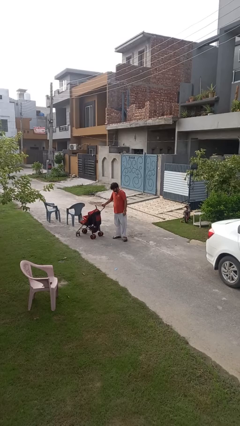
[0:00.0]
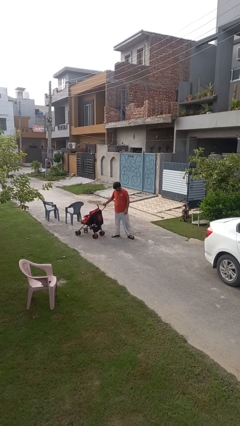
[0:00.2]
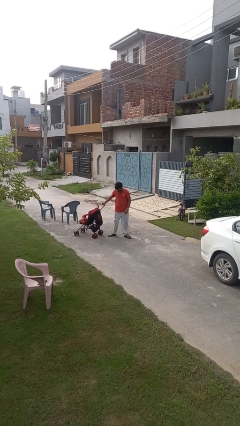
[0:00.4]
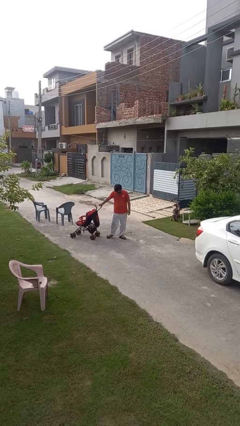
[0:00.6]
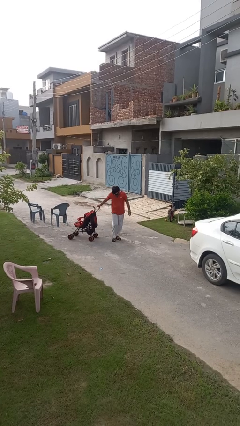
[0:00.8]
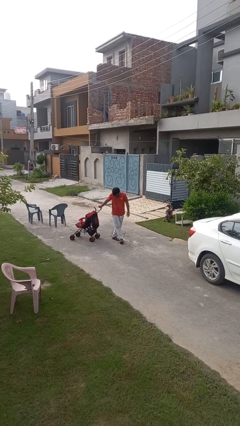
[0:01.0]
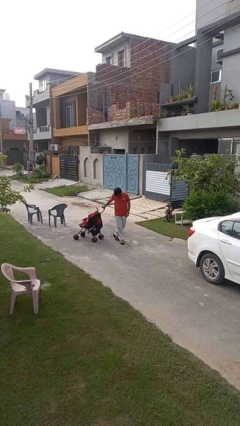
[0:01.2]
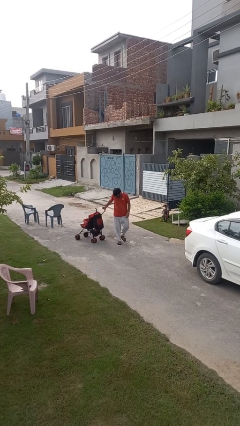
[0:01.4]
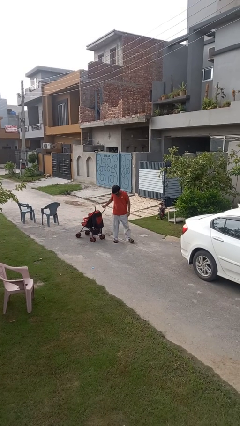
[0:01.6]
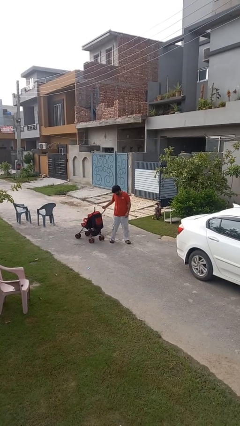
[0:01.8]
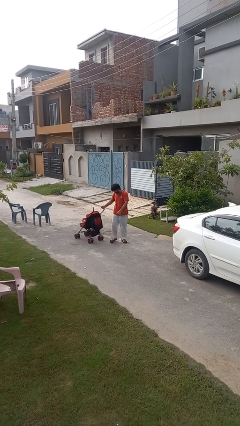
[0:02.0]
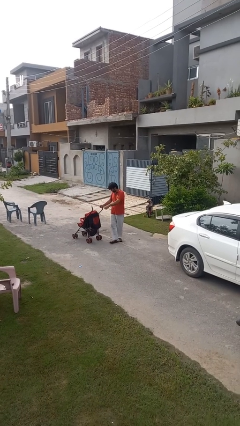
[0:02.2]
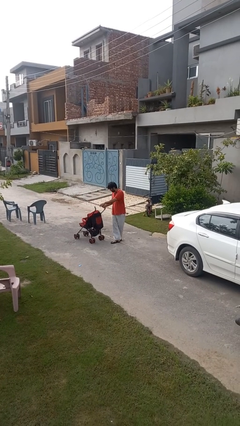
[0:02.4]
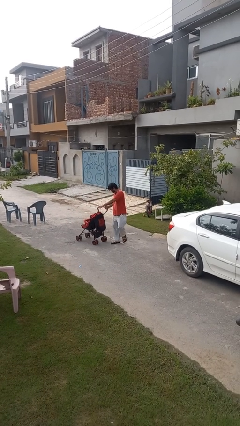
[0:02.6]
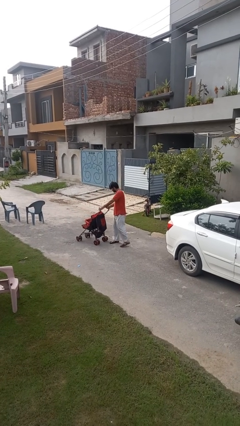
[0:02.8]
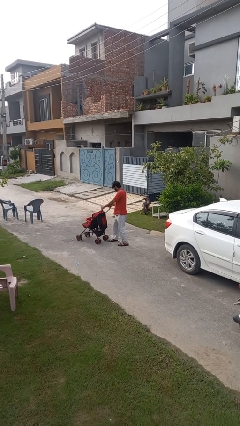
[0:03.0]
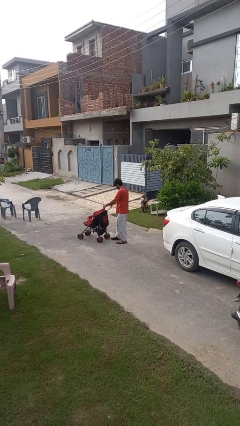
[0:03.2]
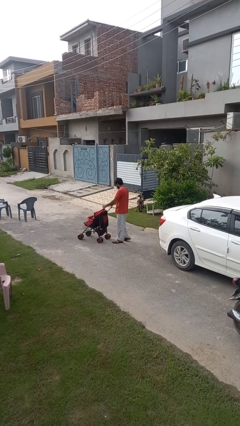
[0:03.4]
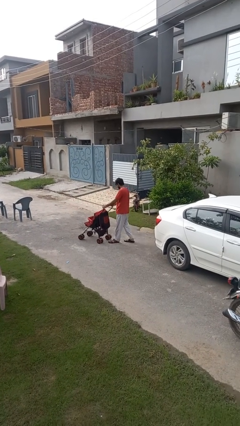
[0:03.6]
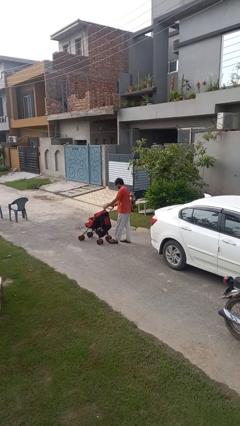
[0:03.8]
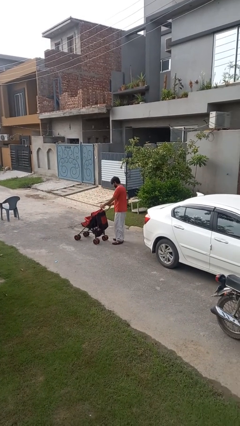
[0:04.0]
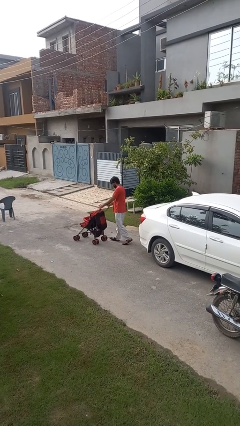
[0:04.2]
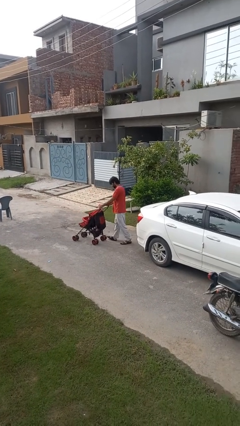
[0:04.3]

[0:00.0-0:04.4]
person pulls wheeled cart

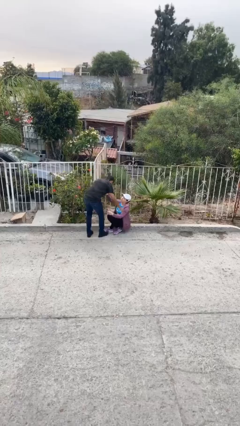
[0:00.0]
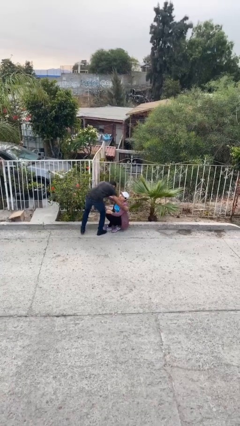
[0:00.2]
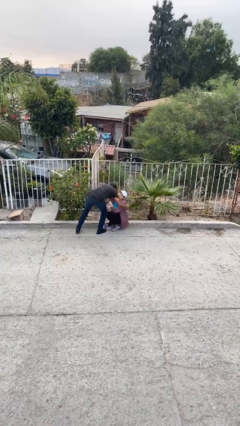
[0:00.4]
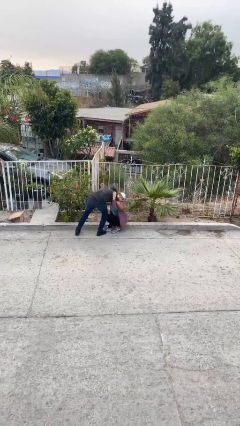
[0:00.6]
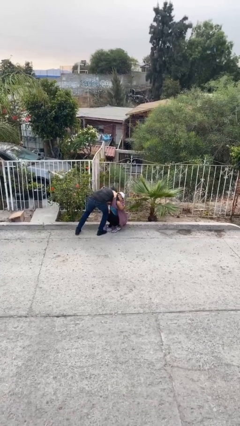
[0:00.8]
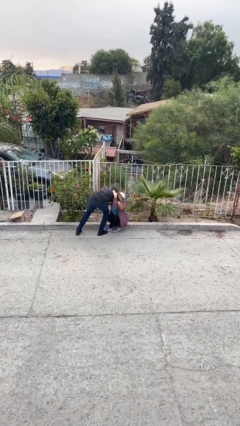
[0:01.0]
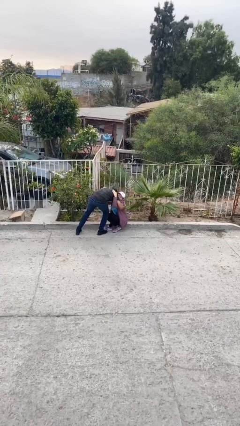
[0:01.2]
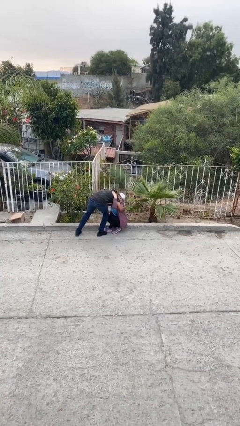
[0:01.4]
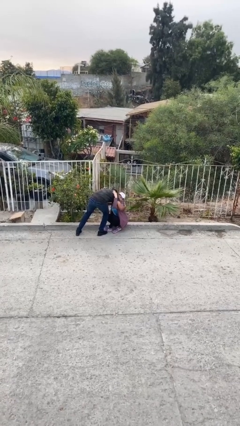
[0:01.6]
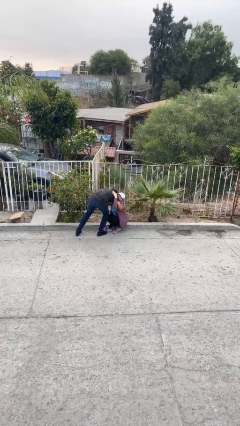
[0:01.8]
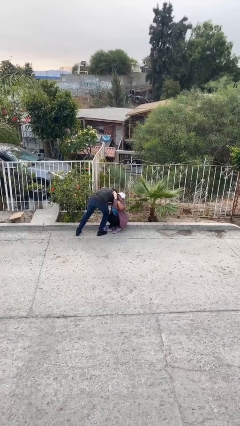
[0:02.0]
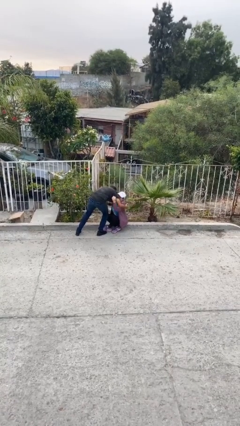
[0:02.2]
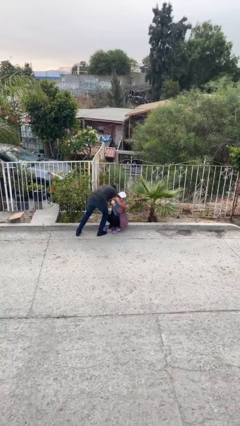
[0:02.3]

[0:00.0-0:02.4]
person embraces person

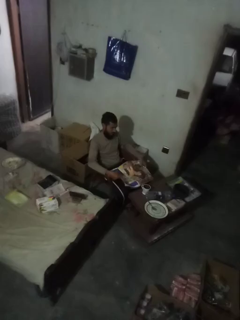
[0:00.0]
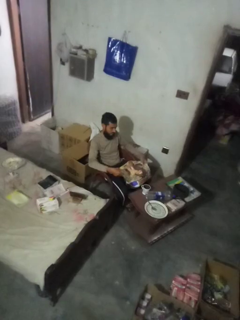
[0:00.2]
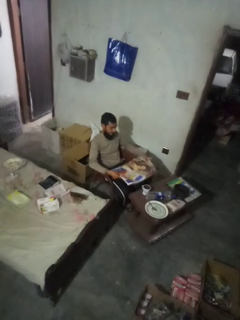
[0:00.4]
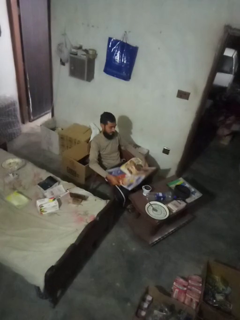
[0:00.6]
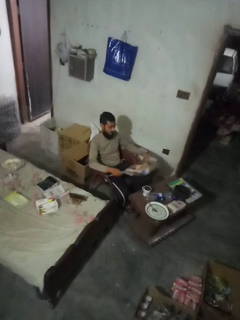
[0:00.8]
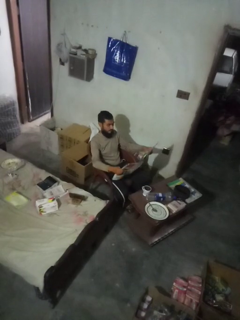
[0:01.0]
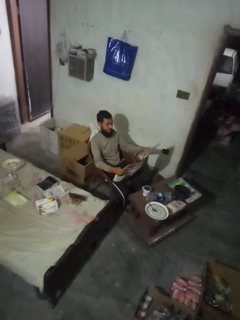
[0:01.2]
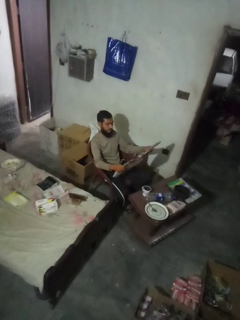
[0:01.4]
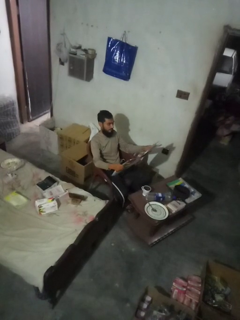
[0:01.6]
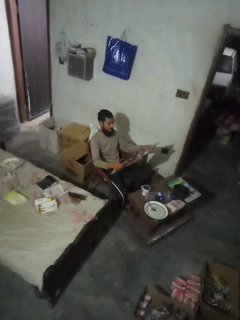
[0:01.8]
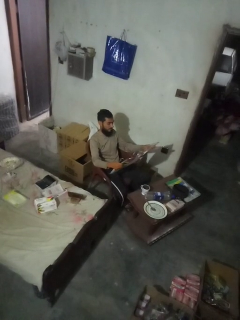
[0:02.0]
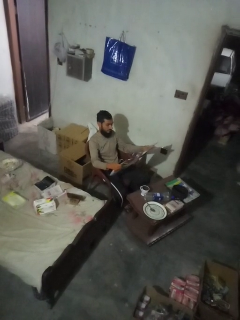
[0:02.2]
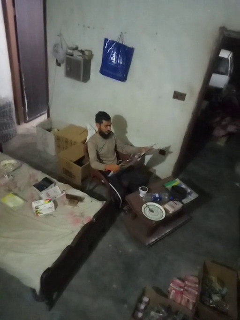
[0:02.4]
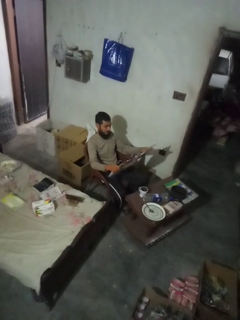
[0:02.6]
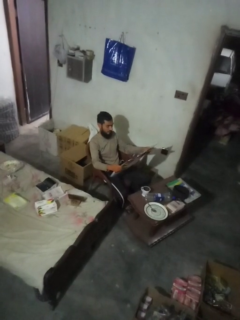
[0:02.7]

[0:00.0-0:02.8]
person reads newspaper

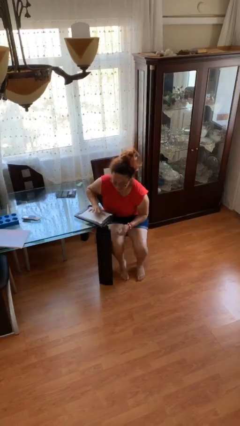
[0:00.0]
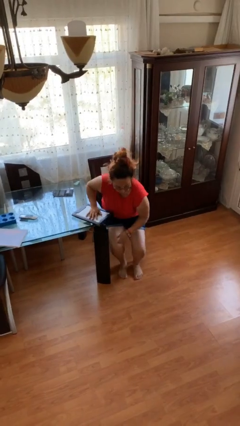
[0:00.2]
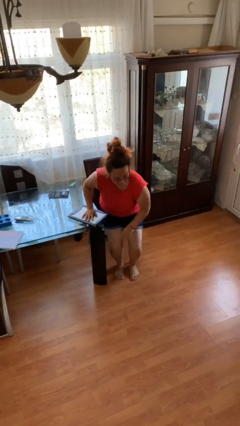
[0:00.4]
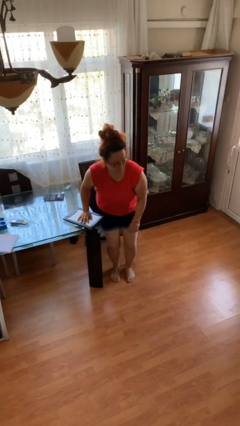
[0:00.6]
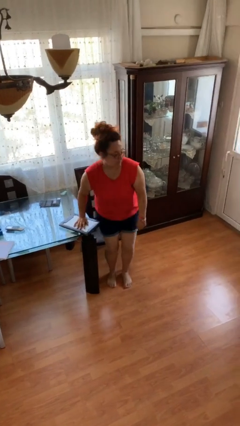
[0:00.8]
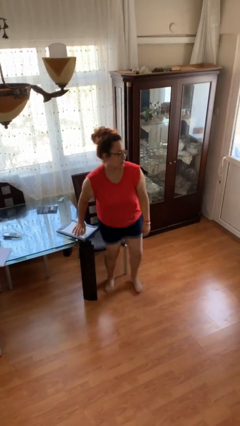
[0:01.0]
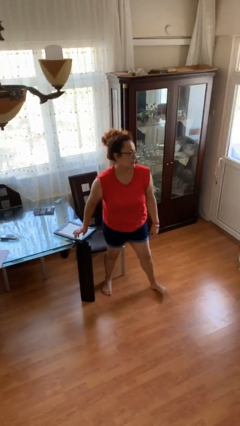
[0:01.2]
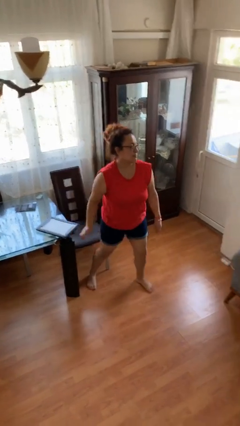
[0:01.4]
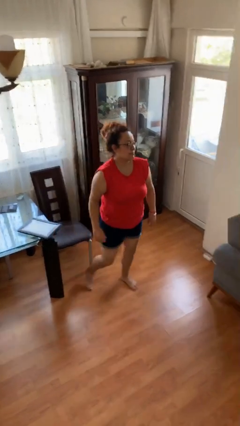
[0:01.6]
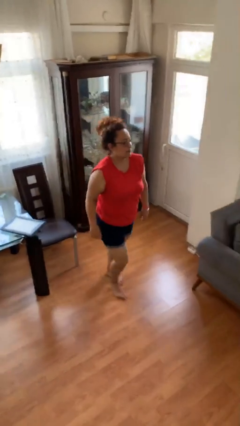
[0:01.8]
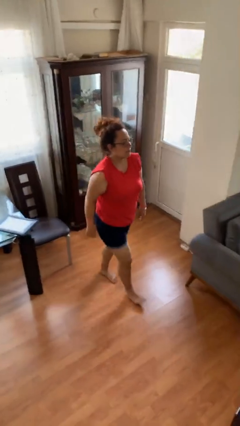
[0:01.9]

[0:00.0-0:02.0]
person stands up

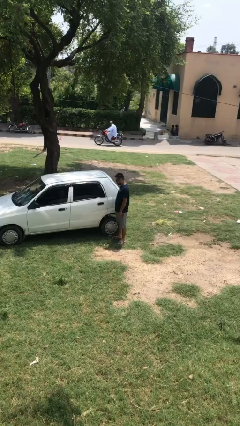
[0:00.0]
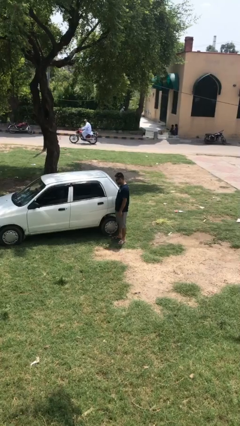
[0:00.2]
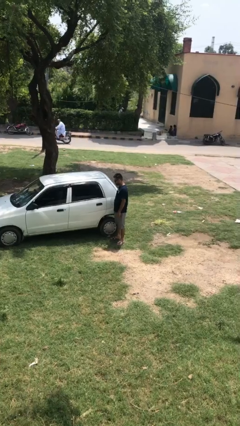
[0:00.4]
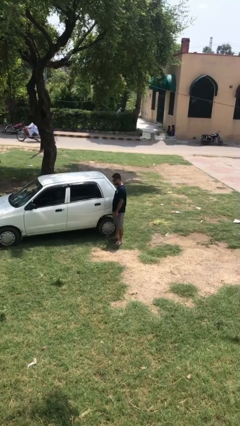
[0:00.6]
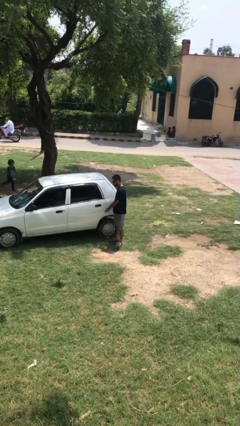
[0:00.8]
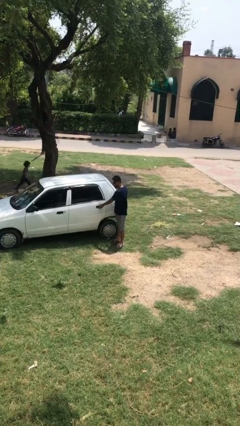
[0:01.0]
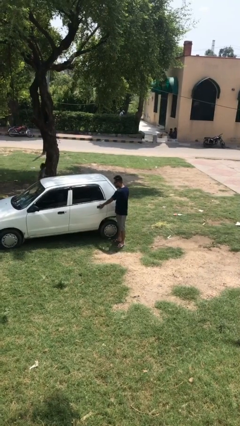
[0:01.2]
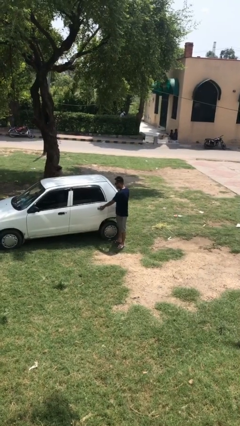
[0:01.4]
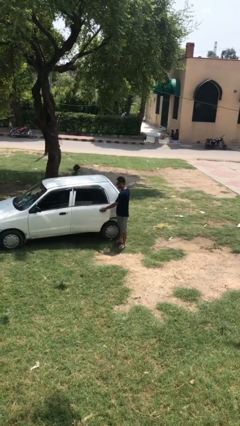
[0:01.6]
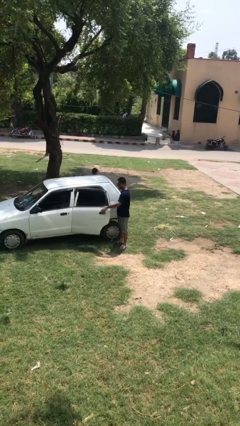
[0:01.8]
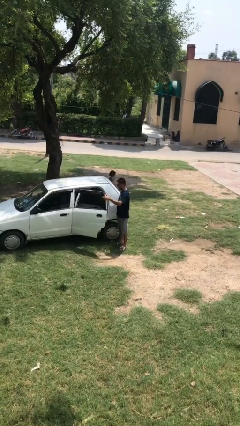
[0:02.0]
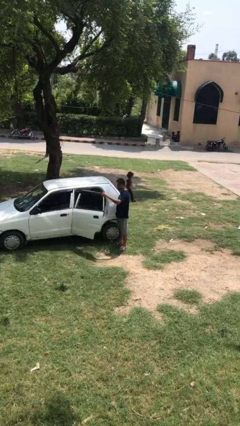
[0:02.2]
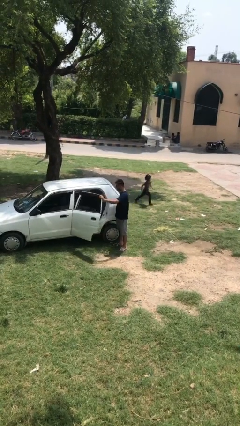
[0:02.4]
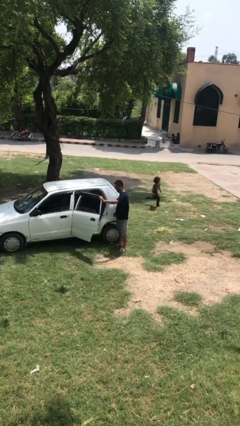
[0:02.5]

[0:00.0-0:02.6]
person opens car door

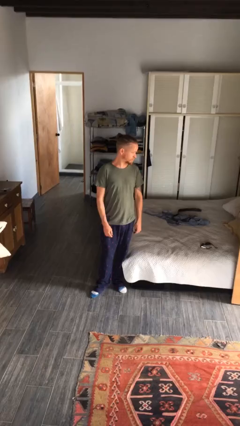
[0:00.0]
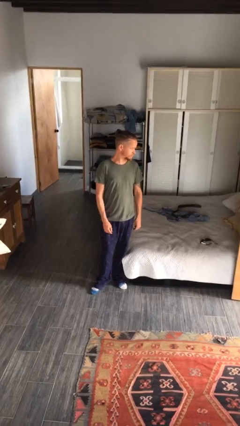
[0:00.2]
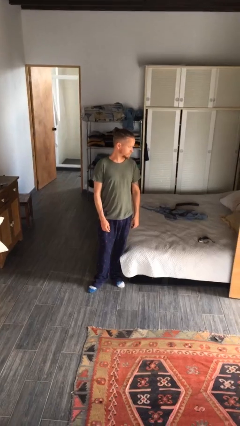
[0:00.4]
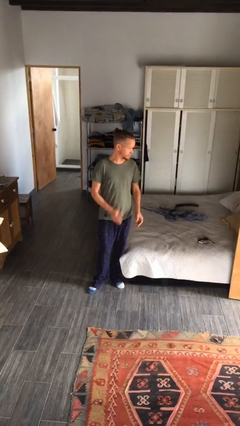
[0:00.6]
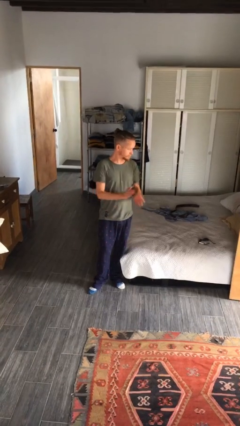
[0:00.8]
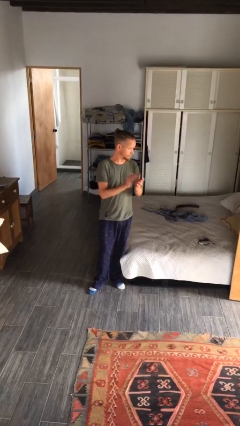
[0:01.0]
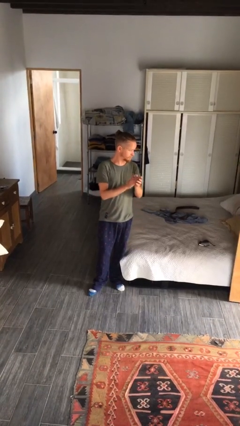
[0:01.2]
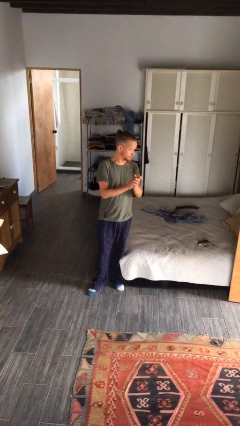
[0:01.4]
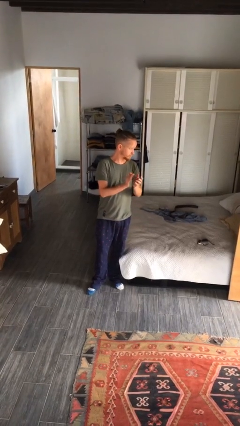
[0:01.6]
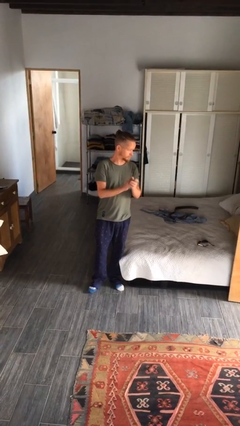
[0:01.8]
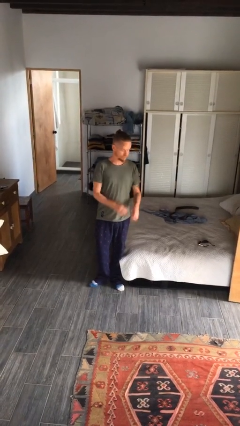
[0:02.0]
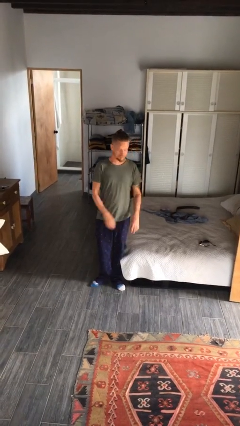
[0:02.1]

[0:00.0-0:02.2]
person claps hands

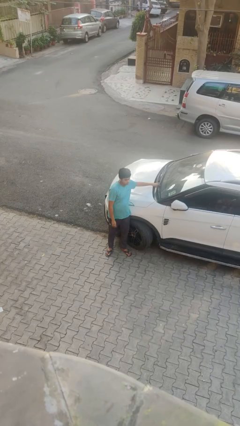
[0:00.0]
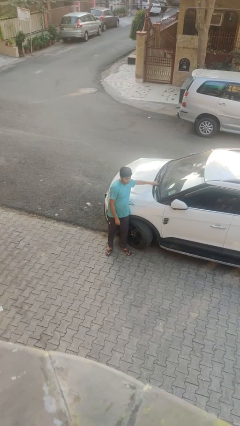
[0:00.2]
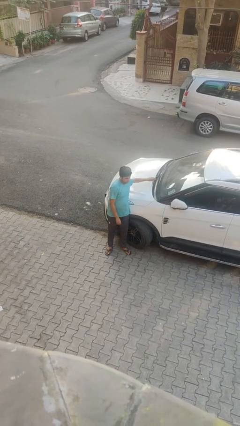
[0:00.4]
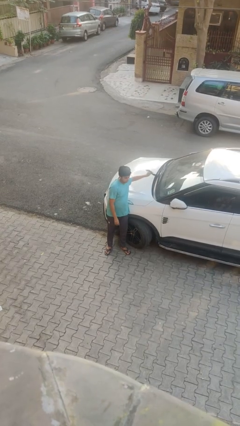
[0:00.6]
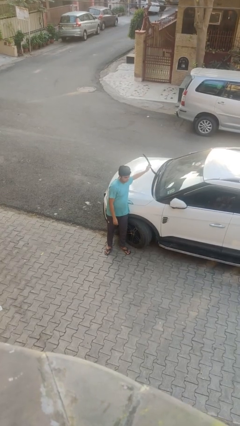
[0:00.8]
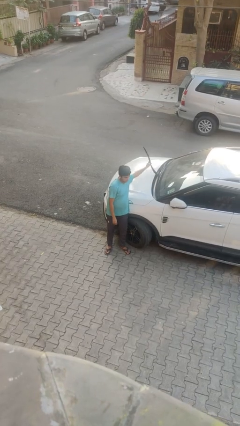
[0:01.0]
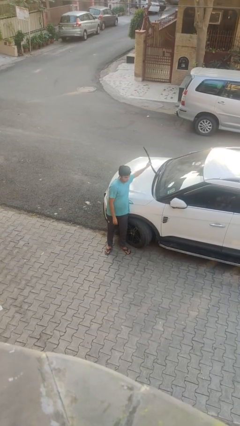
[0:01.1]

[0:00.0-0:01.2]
person flips up car wipers
